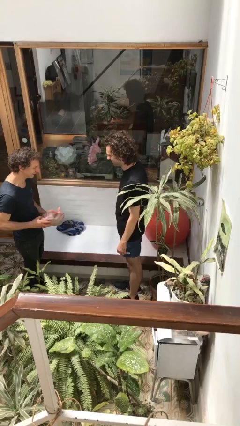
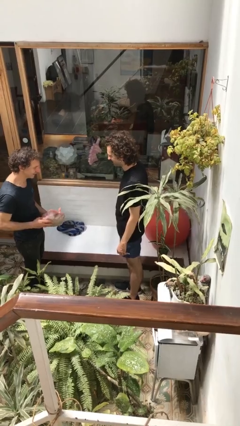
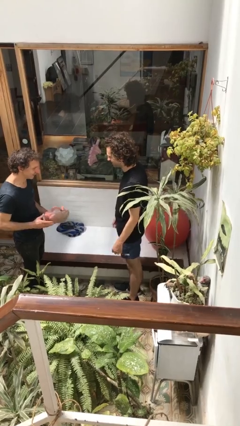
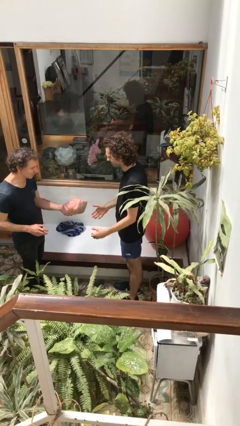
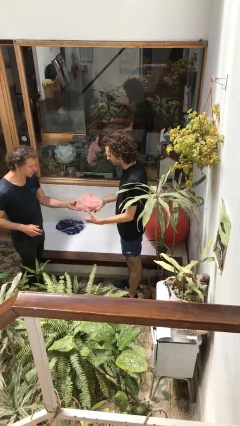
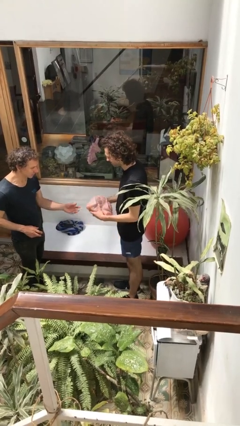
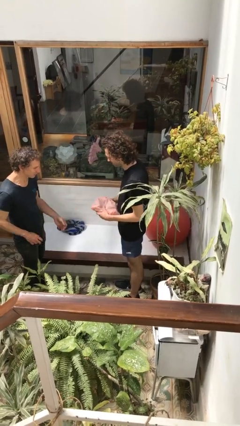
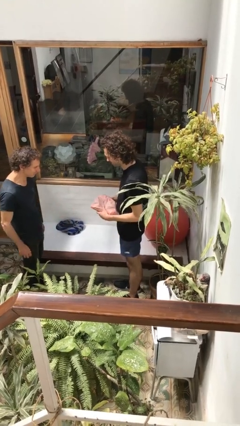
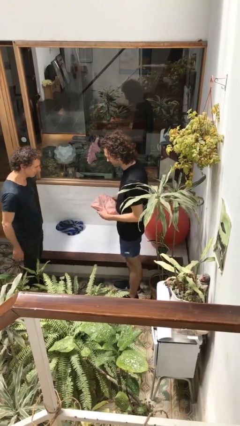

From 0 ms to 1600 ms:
person transfers object to person

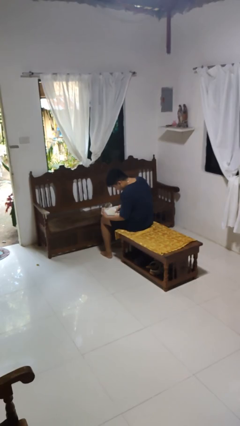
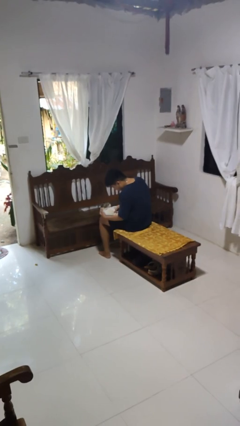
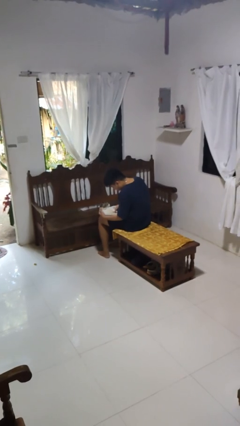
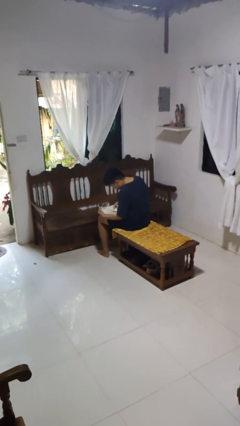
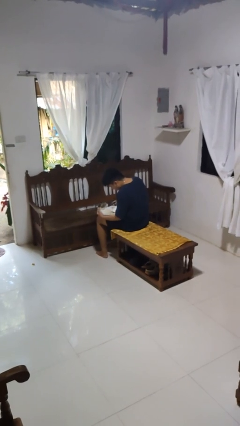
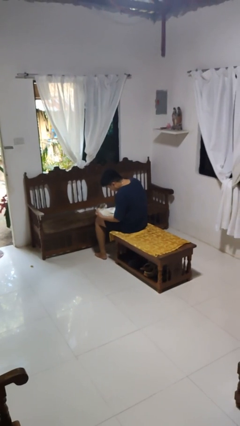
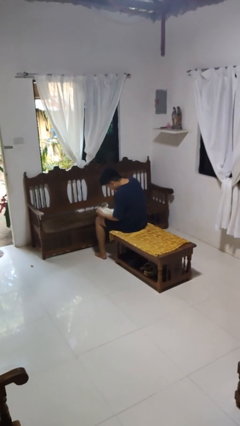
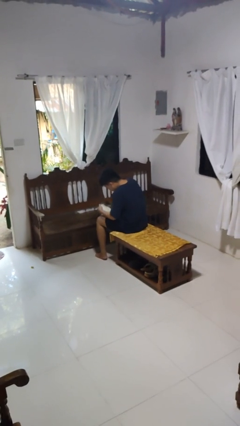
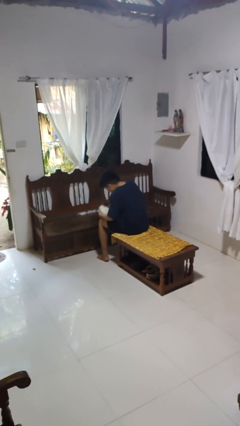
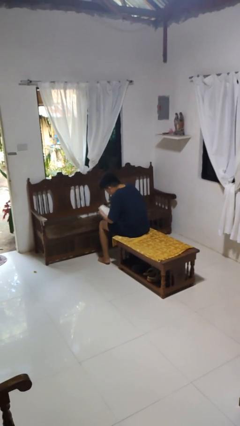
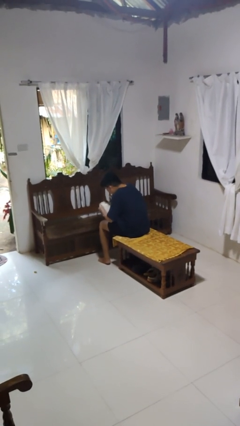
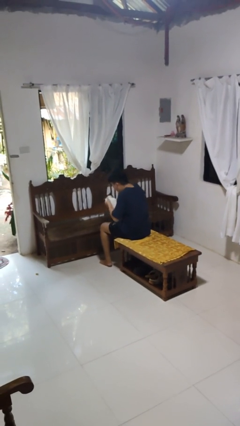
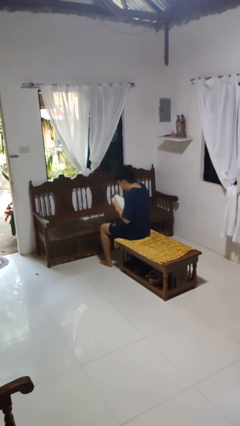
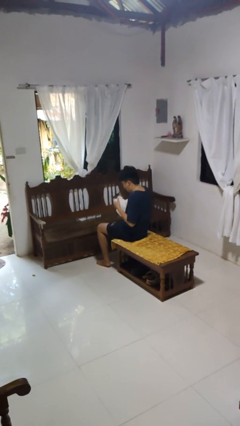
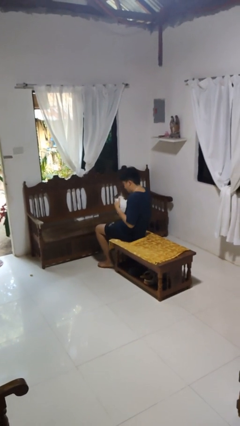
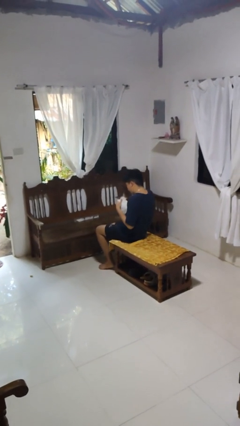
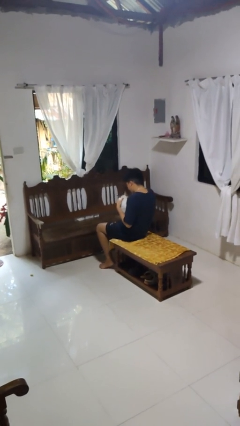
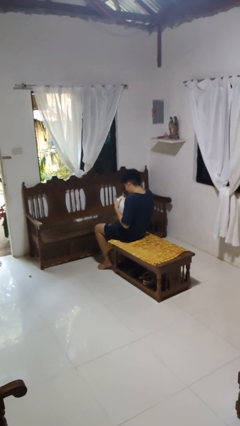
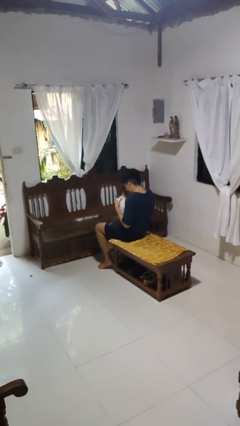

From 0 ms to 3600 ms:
person hugs cat

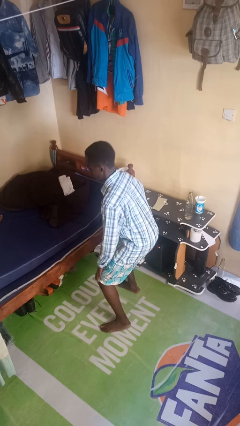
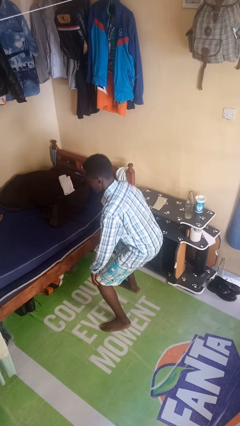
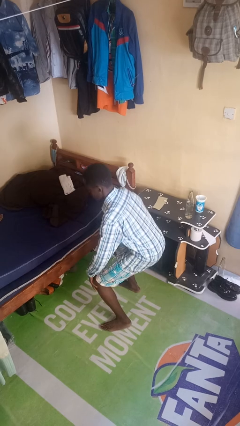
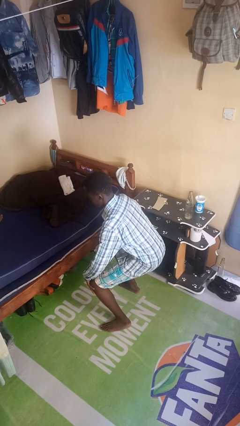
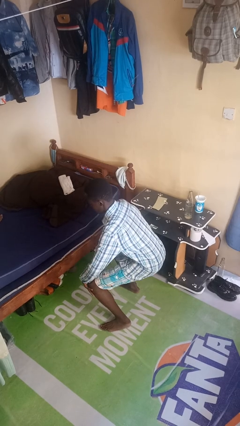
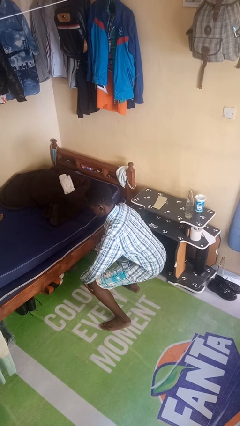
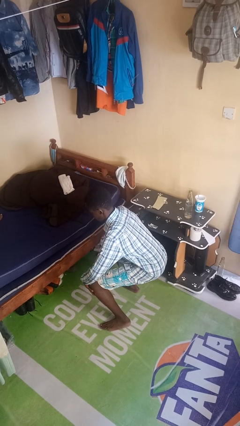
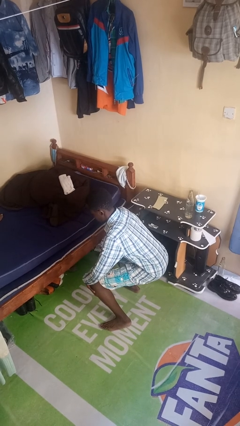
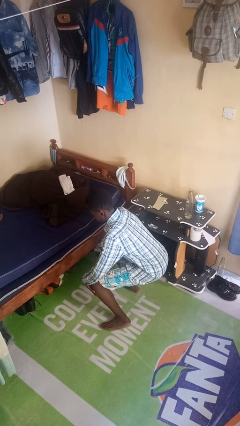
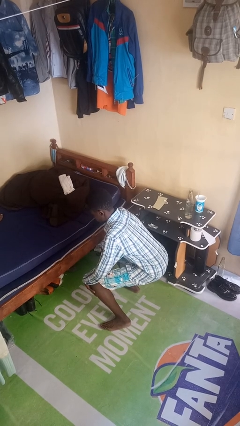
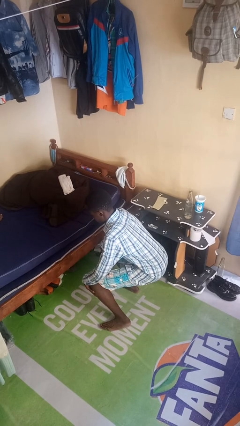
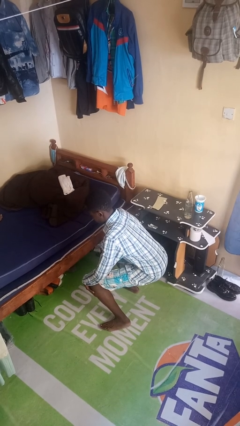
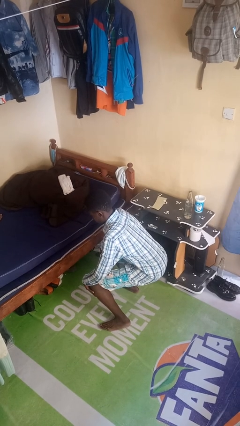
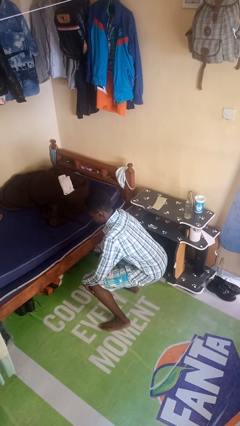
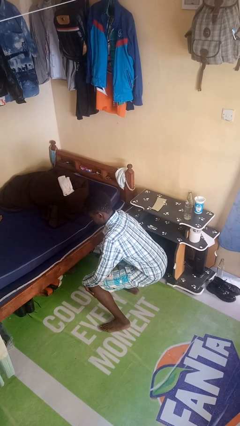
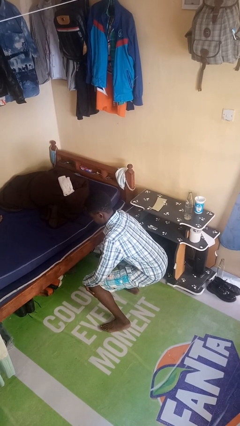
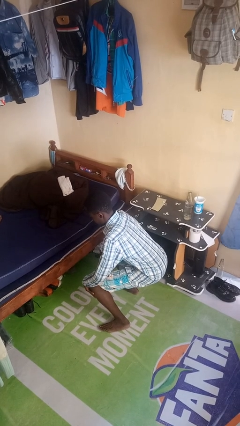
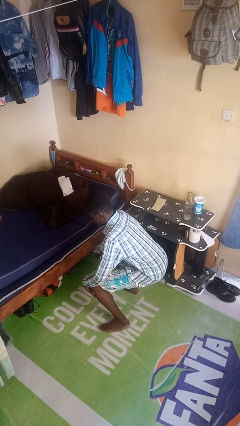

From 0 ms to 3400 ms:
person squats

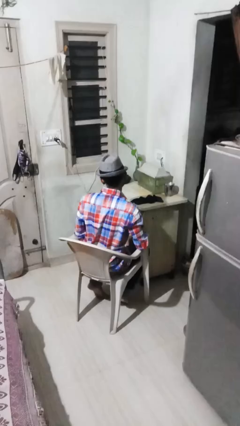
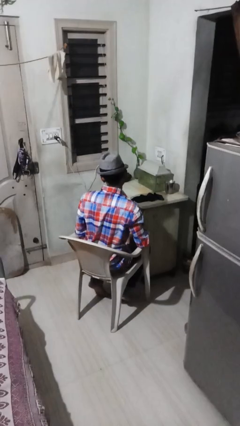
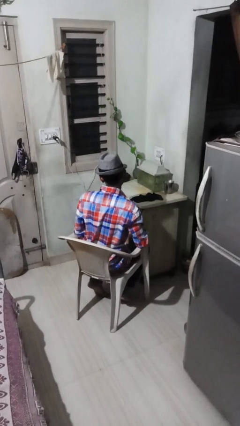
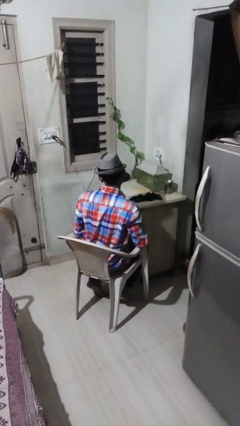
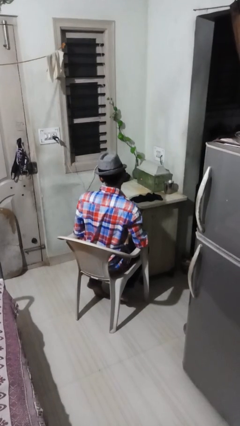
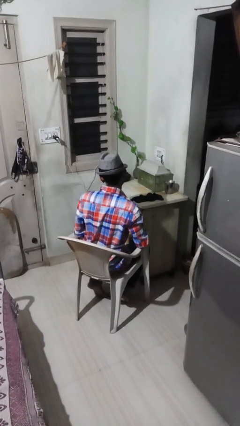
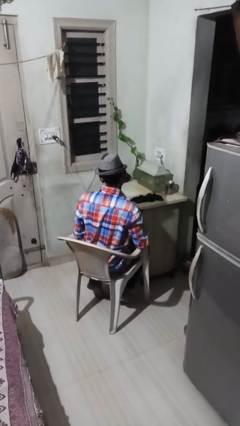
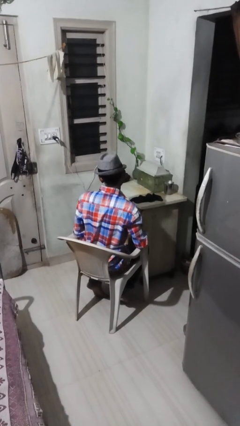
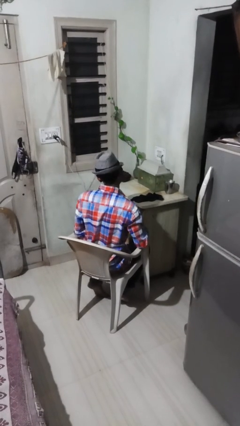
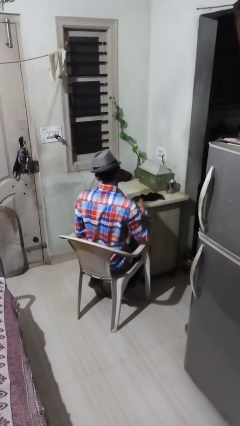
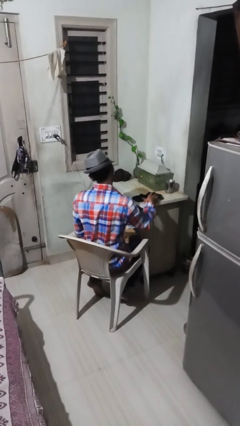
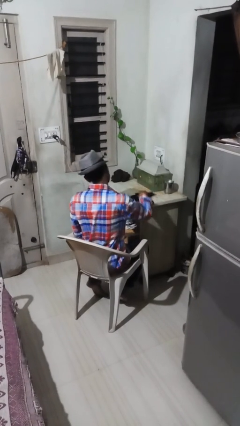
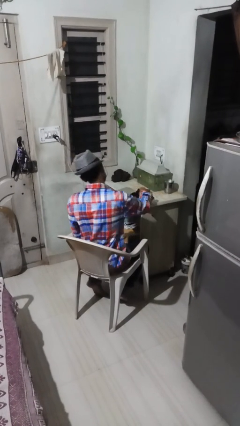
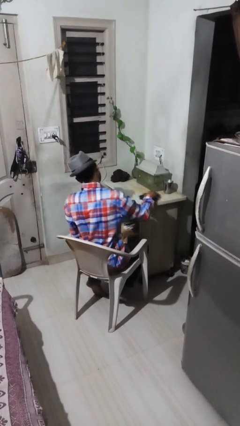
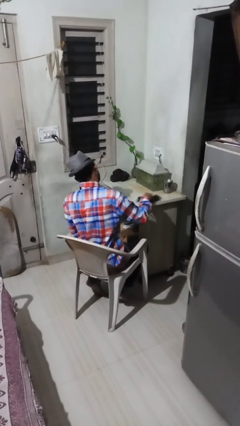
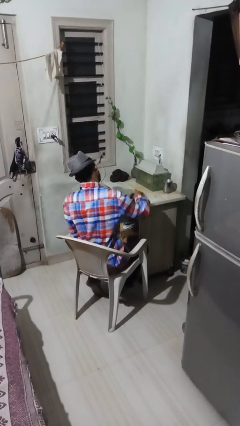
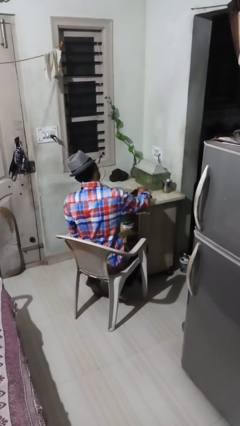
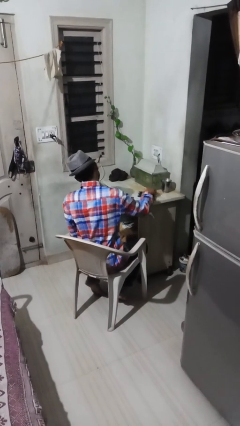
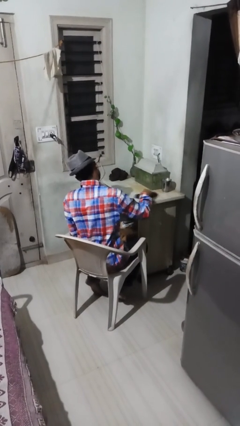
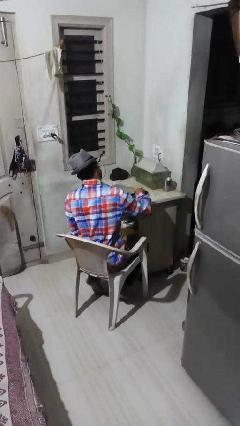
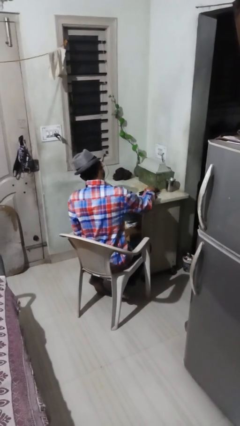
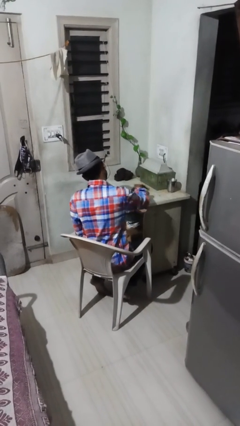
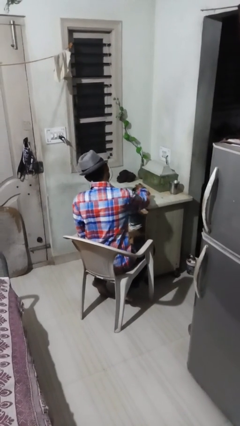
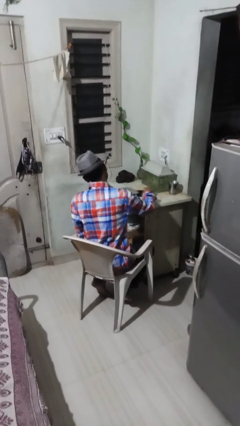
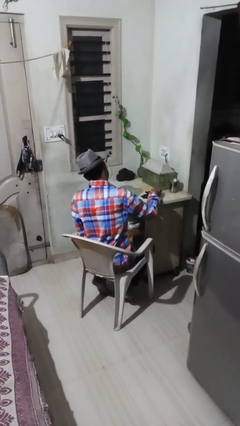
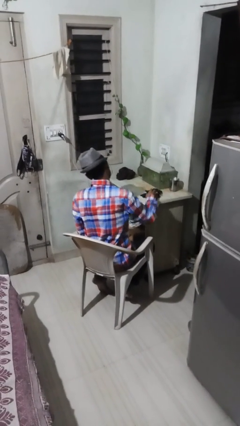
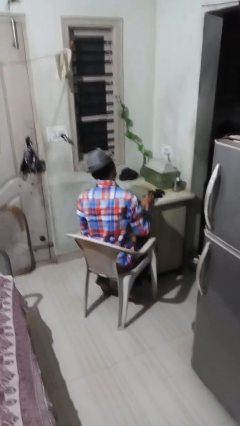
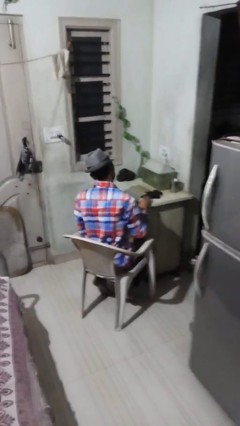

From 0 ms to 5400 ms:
person cleans table with rag

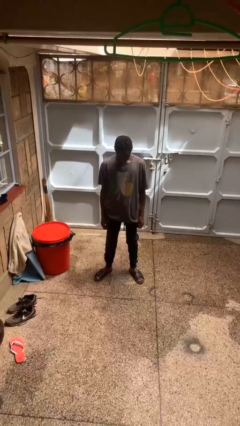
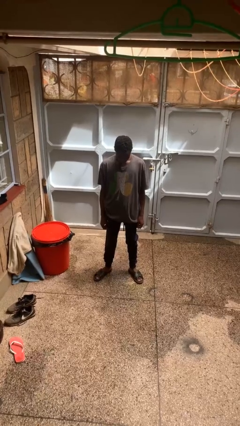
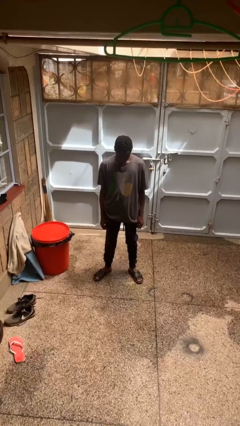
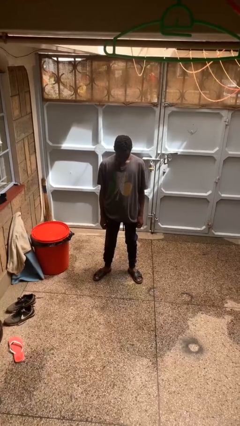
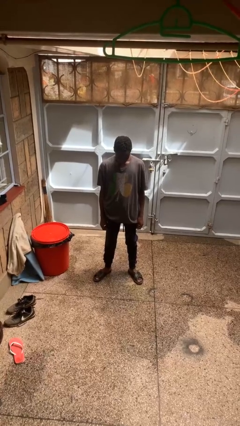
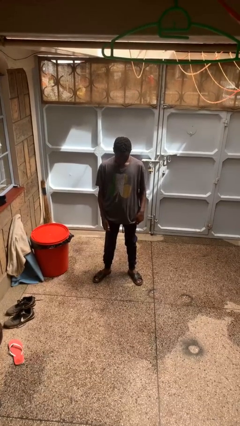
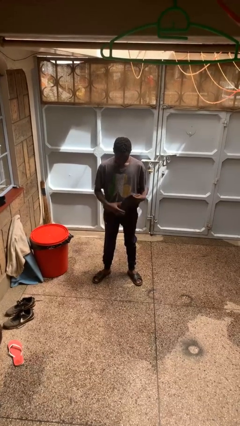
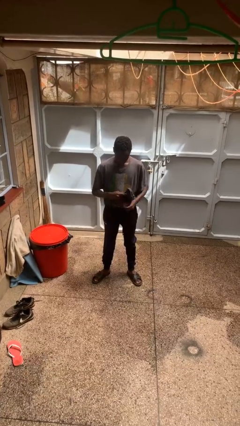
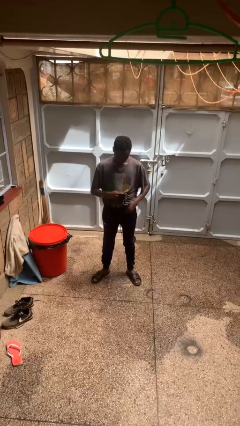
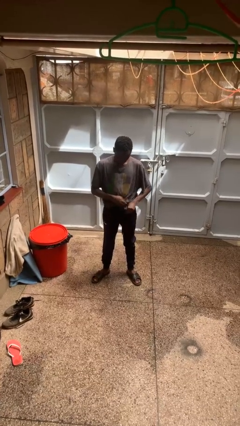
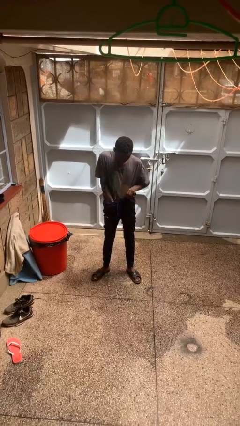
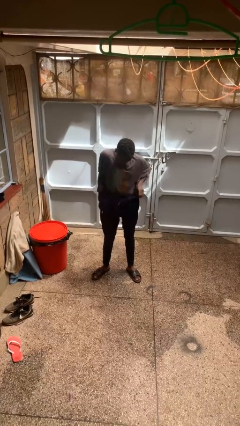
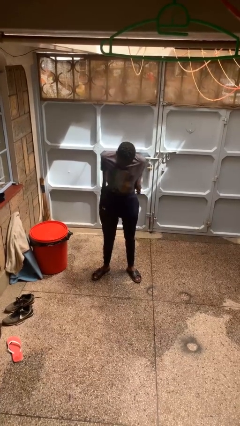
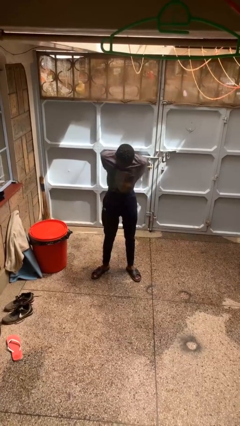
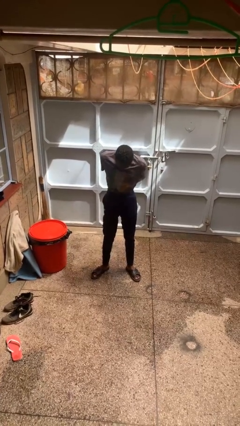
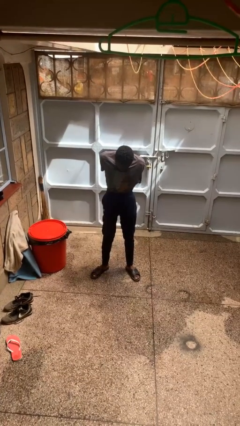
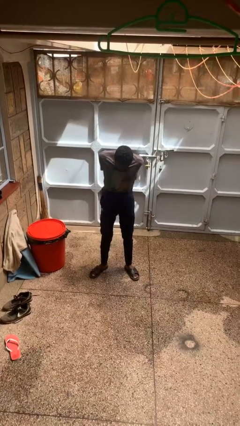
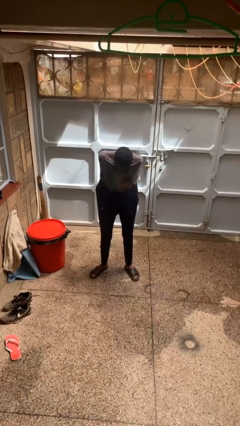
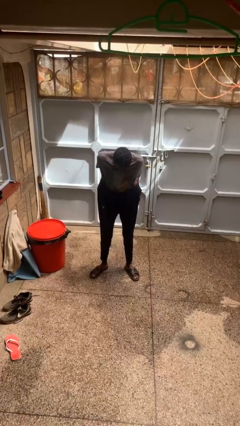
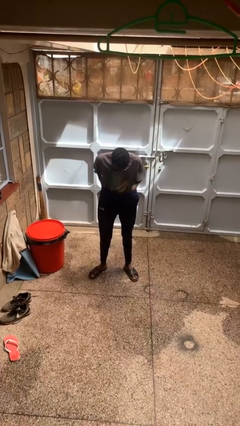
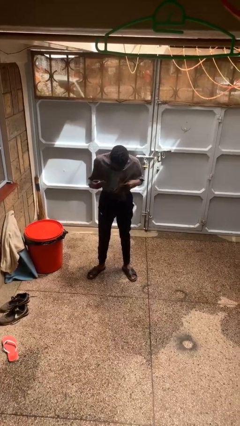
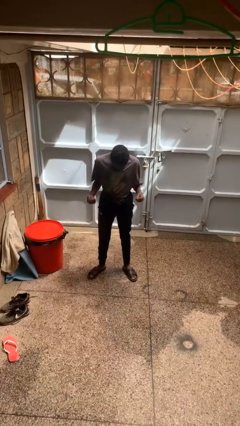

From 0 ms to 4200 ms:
person tucks in shirt
